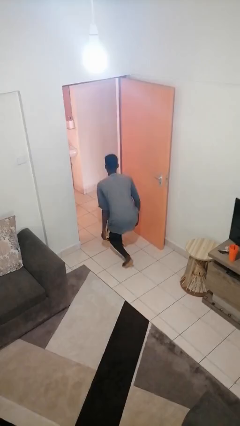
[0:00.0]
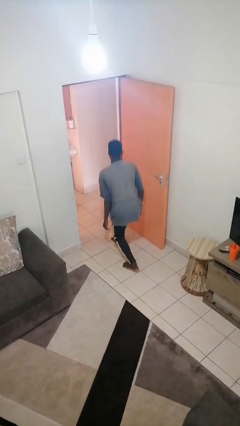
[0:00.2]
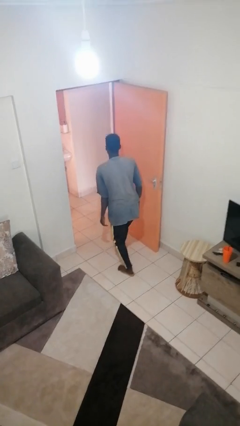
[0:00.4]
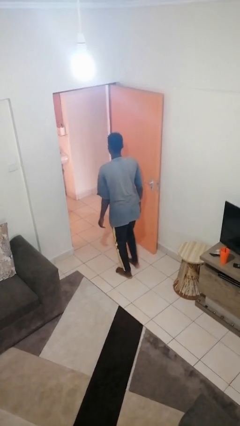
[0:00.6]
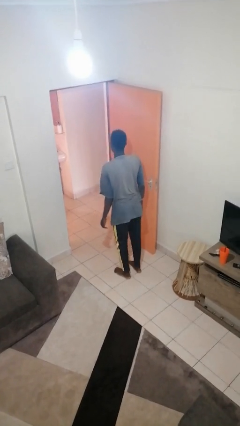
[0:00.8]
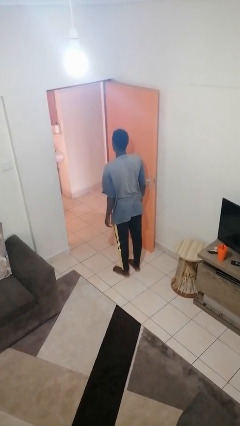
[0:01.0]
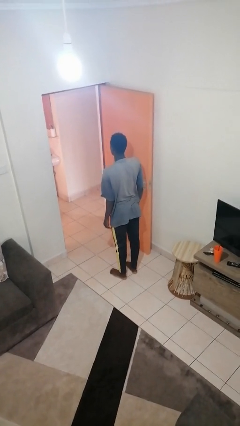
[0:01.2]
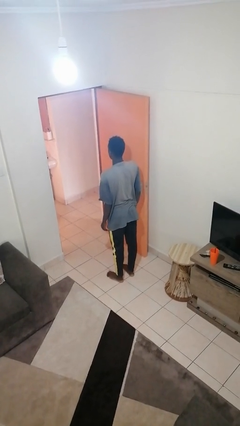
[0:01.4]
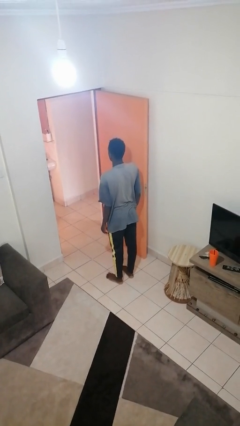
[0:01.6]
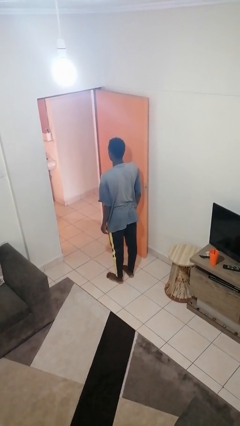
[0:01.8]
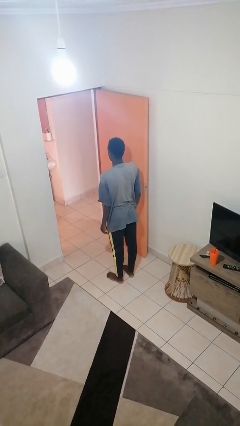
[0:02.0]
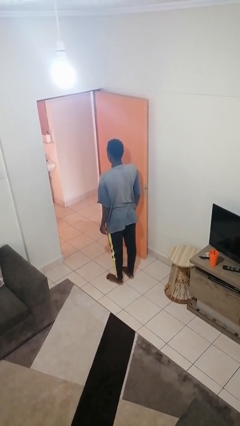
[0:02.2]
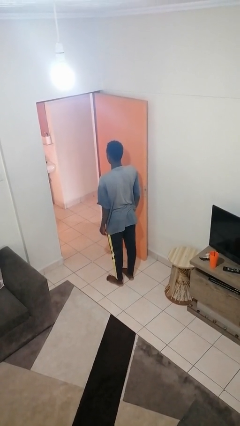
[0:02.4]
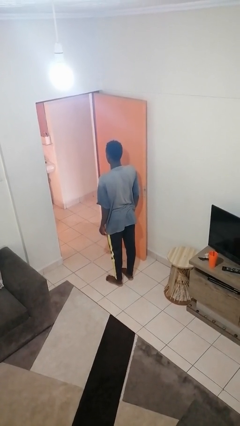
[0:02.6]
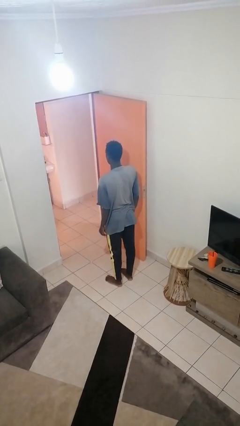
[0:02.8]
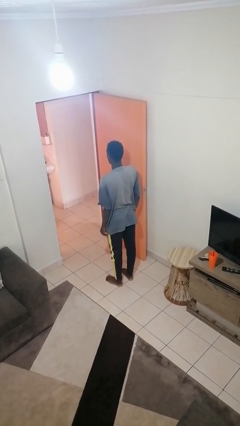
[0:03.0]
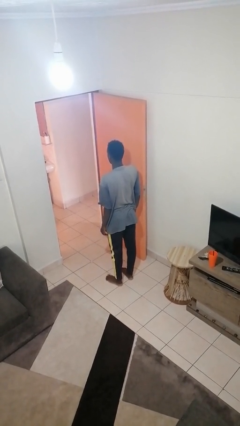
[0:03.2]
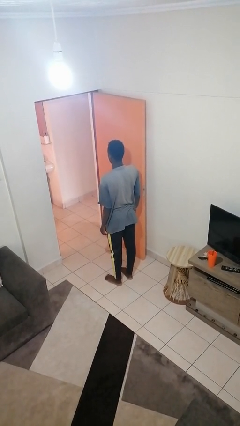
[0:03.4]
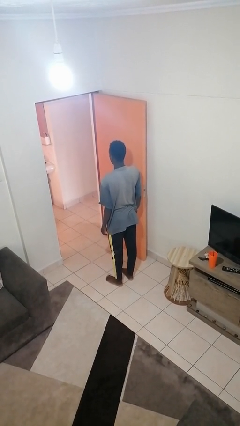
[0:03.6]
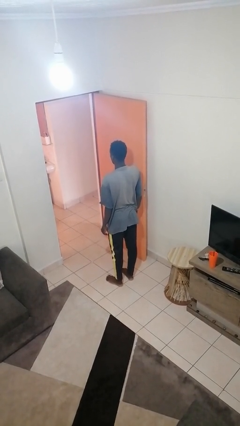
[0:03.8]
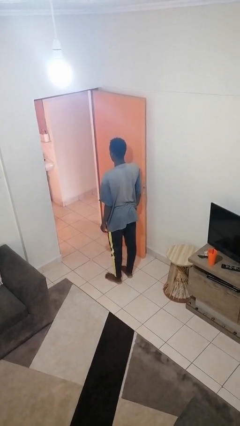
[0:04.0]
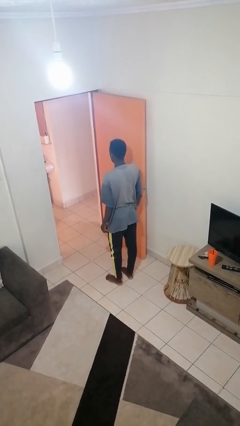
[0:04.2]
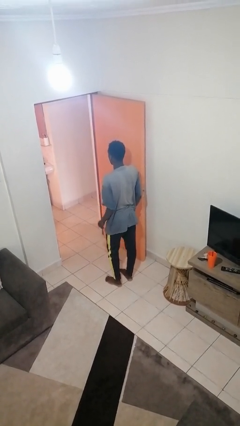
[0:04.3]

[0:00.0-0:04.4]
person stands up from floor

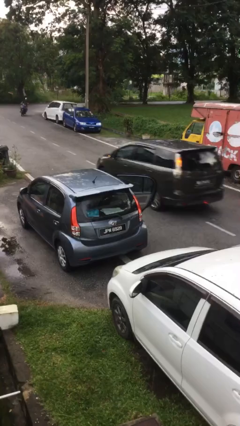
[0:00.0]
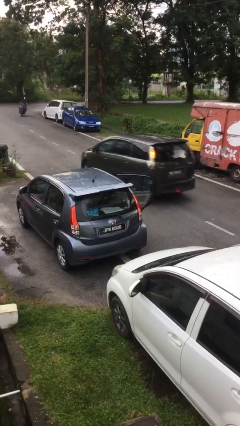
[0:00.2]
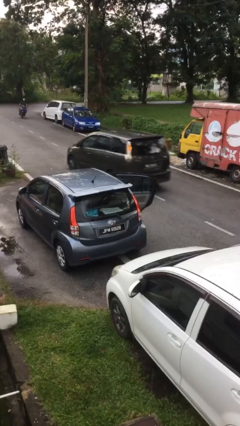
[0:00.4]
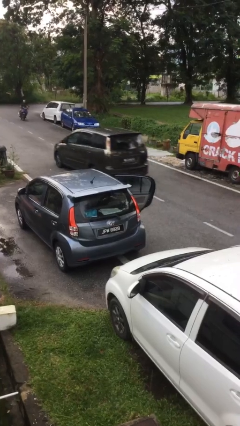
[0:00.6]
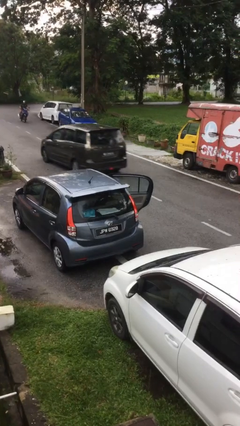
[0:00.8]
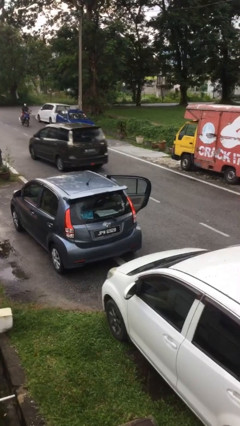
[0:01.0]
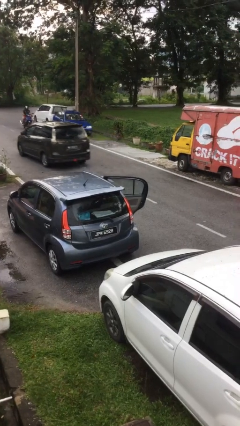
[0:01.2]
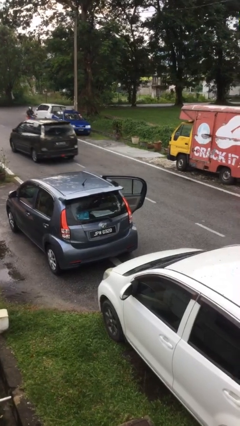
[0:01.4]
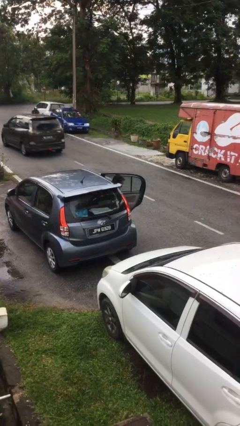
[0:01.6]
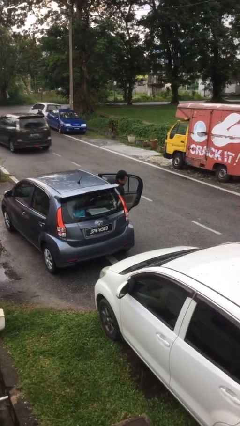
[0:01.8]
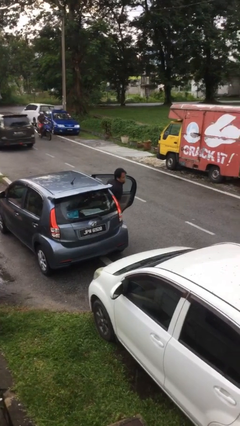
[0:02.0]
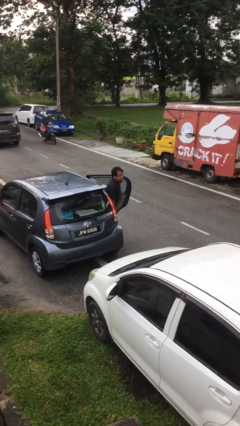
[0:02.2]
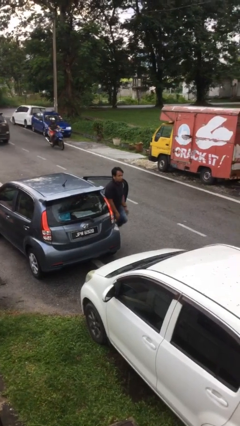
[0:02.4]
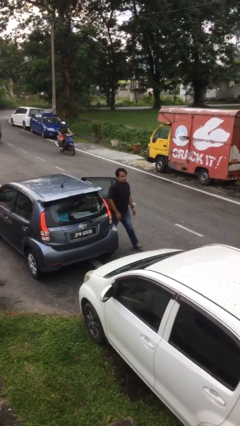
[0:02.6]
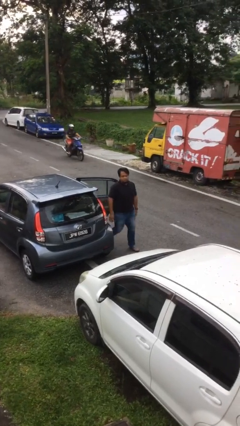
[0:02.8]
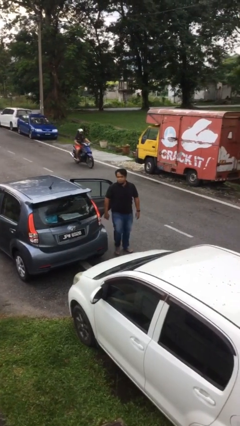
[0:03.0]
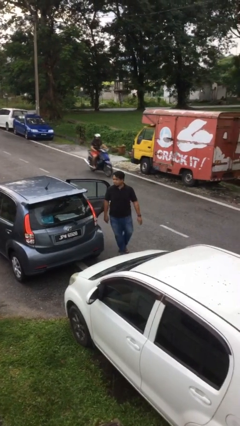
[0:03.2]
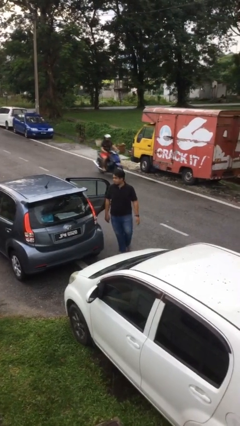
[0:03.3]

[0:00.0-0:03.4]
person exits car

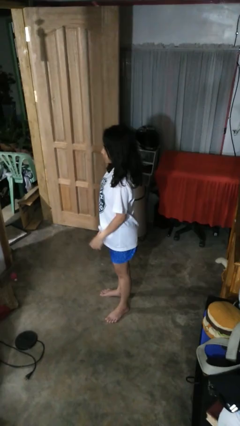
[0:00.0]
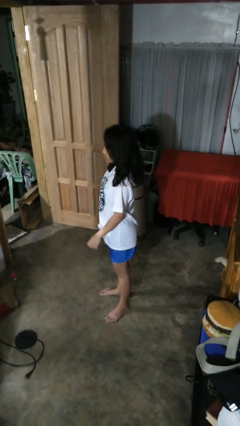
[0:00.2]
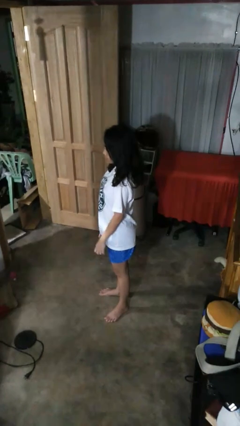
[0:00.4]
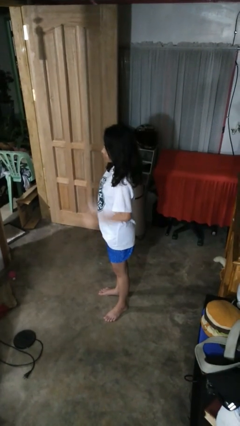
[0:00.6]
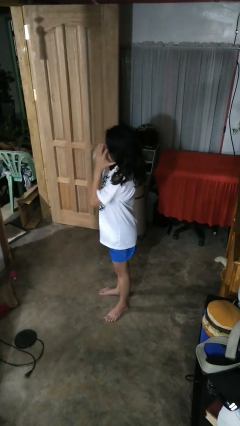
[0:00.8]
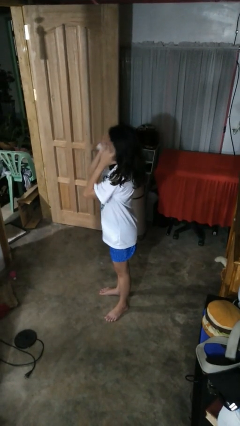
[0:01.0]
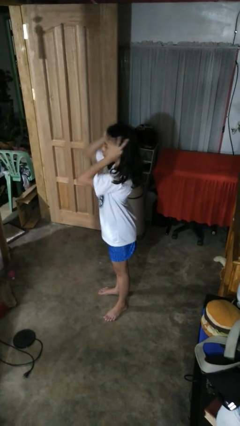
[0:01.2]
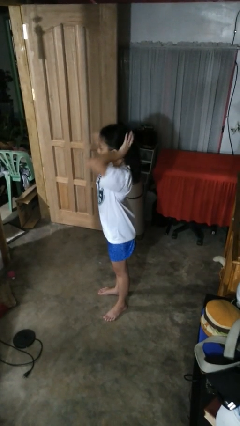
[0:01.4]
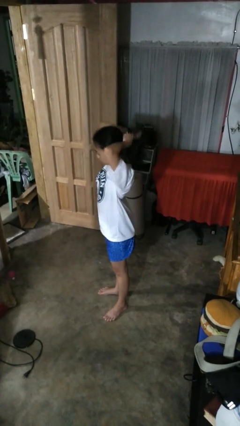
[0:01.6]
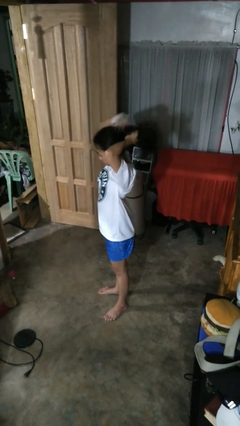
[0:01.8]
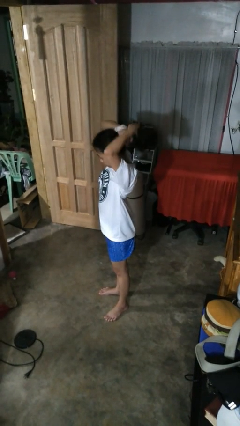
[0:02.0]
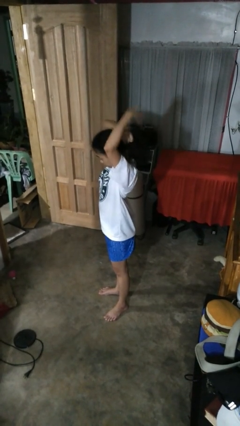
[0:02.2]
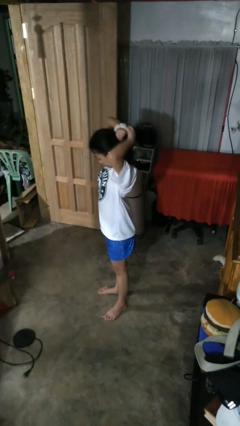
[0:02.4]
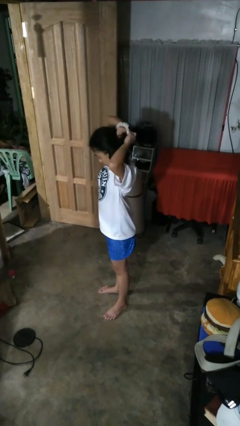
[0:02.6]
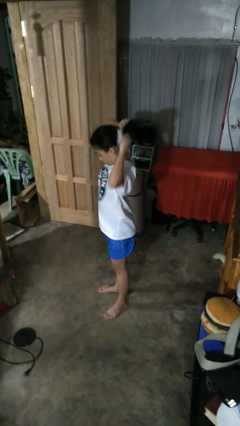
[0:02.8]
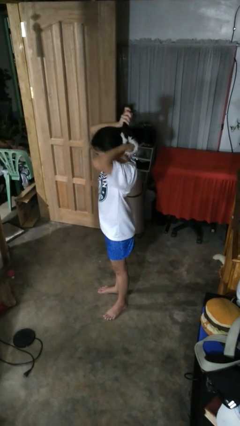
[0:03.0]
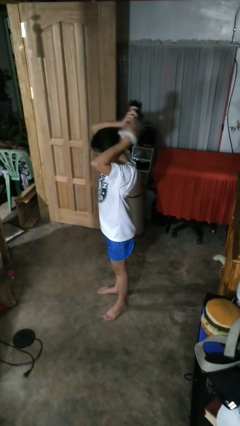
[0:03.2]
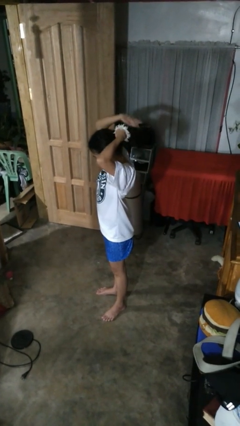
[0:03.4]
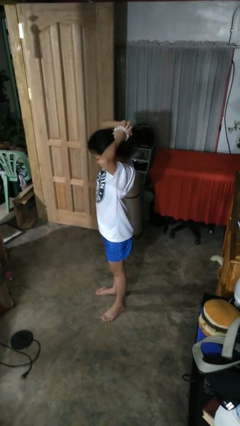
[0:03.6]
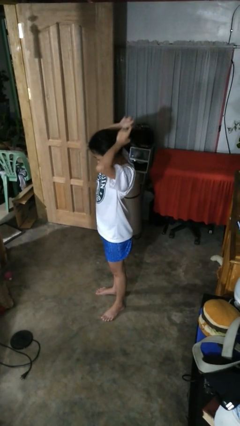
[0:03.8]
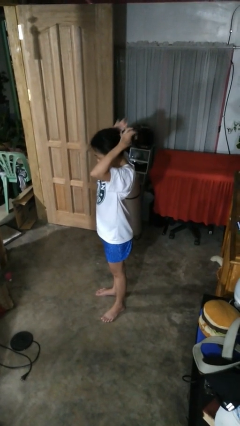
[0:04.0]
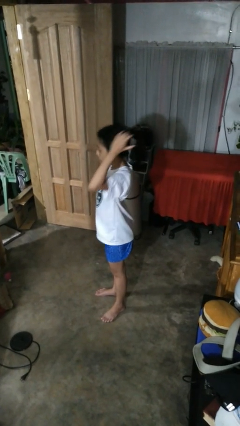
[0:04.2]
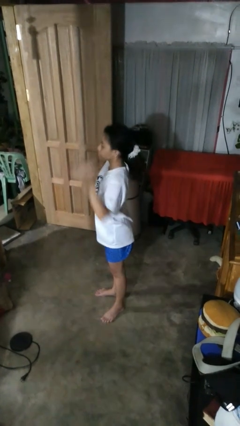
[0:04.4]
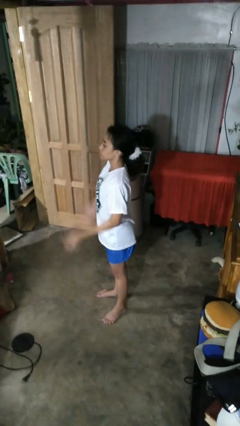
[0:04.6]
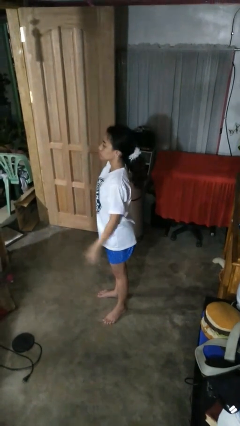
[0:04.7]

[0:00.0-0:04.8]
person puts hair in ponytail

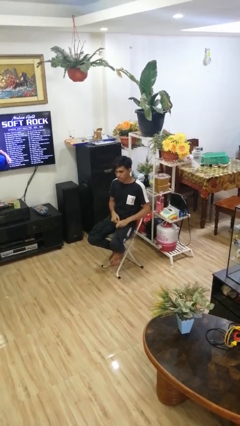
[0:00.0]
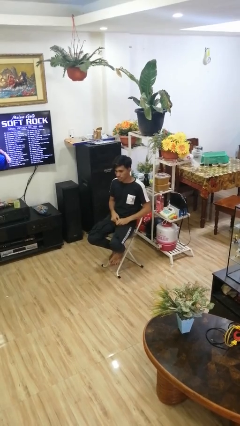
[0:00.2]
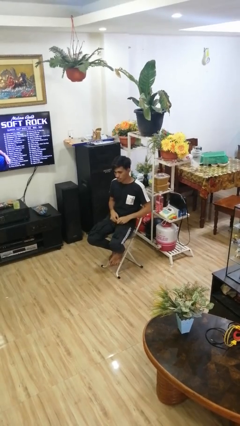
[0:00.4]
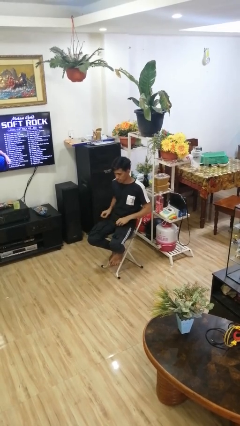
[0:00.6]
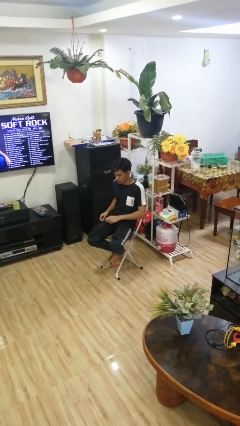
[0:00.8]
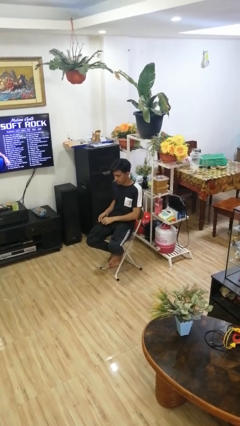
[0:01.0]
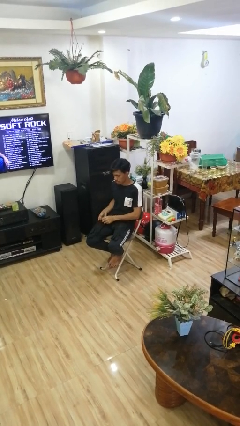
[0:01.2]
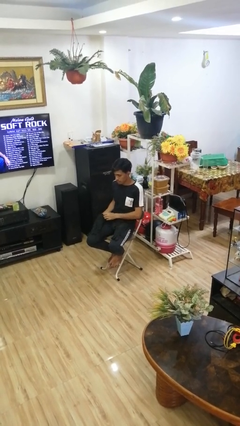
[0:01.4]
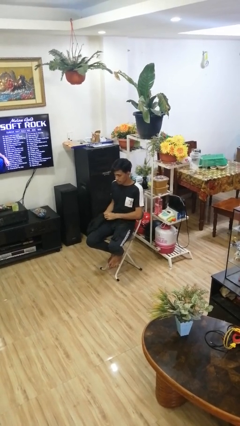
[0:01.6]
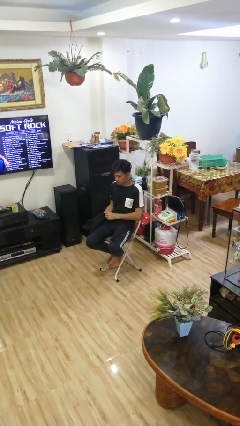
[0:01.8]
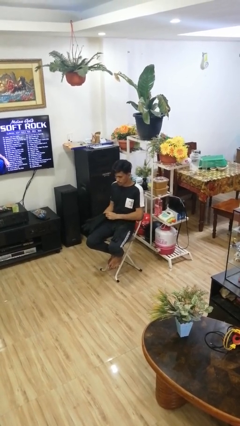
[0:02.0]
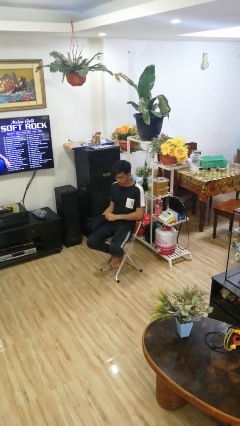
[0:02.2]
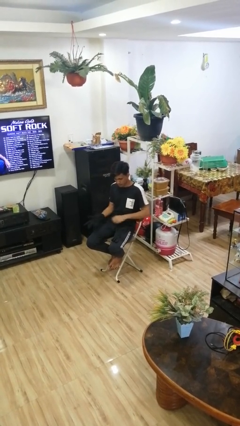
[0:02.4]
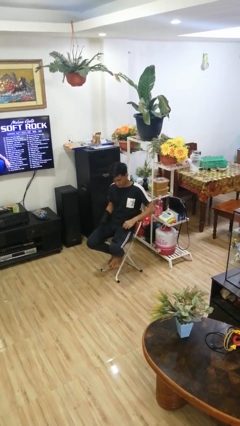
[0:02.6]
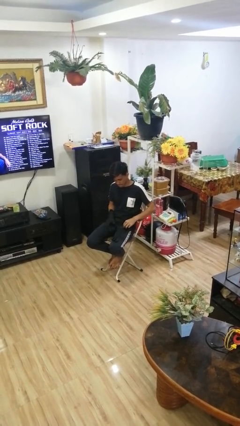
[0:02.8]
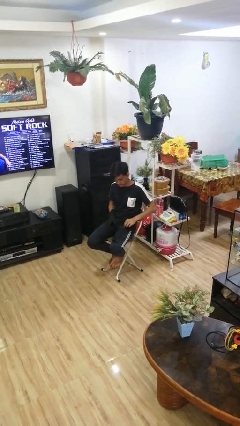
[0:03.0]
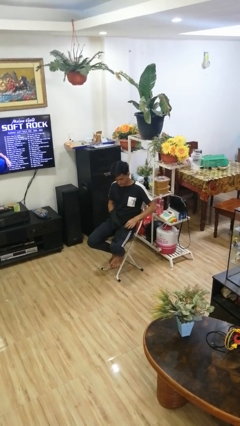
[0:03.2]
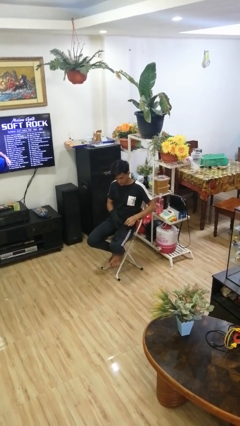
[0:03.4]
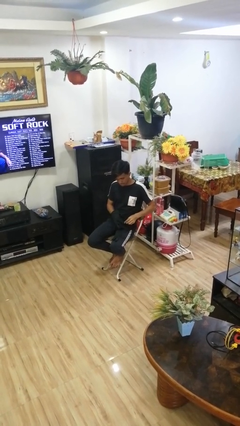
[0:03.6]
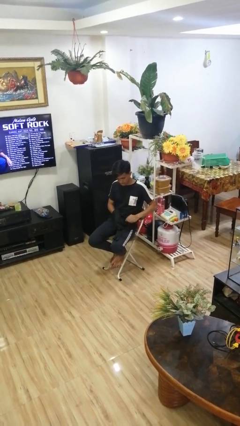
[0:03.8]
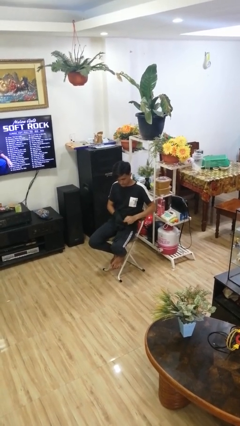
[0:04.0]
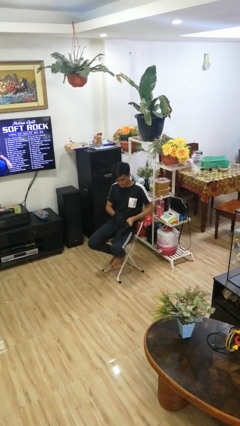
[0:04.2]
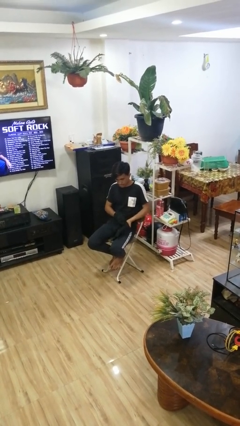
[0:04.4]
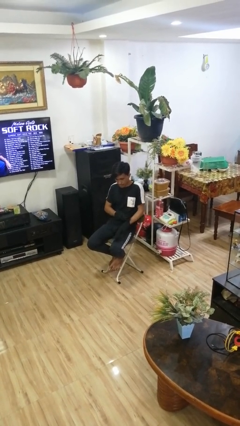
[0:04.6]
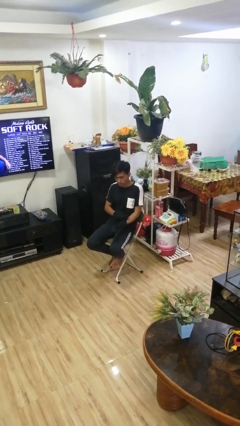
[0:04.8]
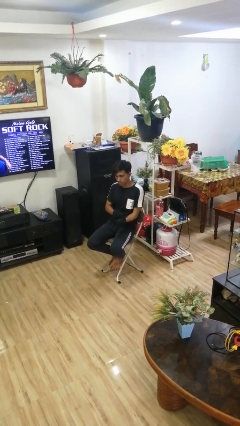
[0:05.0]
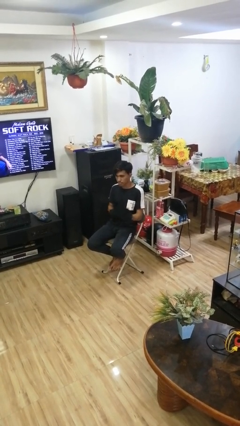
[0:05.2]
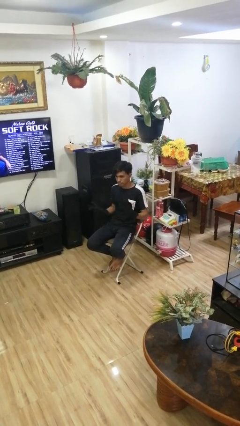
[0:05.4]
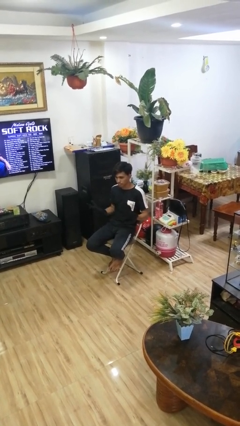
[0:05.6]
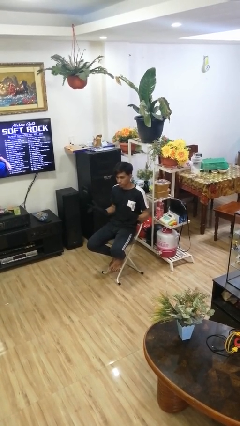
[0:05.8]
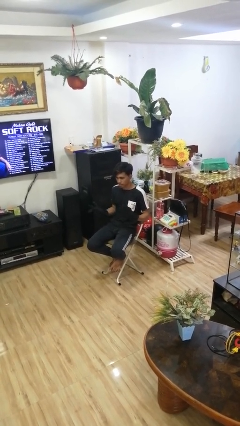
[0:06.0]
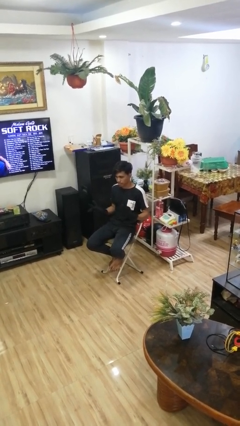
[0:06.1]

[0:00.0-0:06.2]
person puts on gloves
